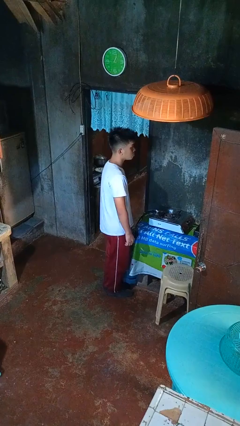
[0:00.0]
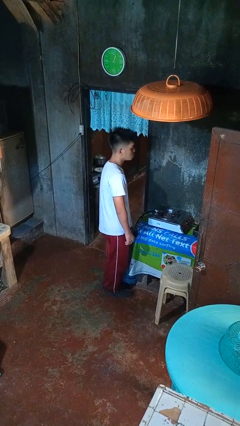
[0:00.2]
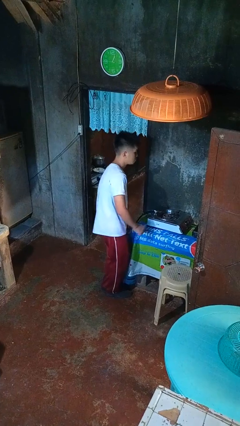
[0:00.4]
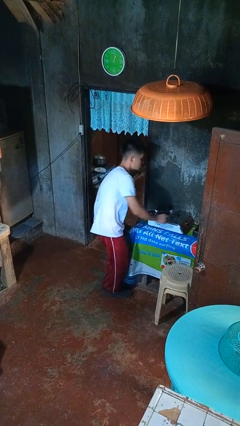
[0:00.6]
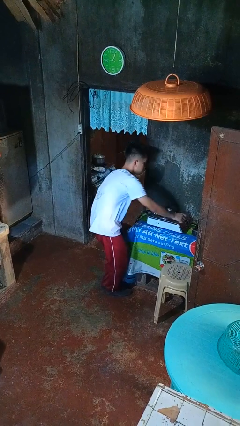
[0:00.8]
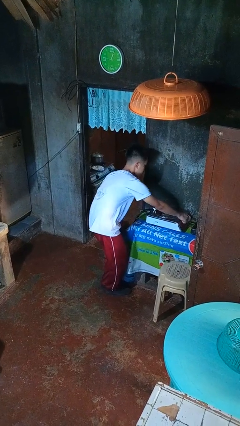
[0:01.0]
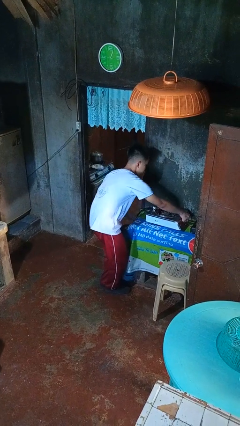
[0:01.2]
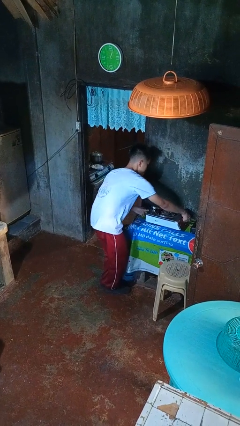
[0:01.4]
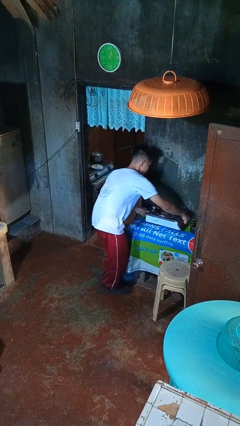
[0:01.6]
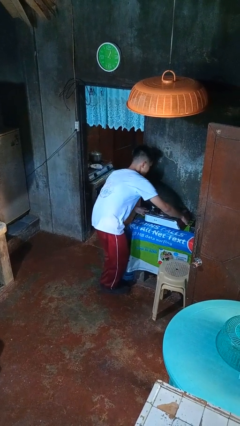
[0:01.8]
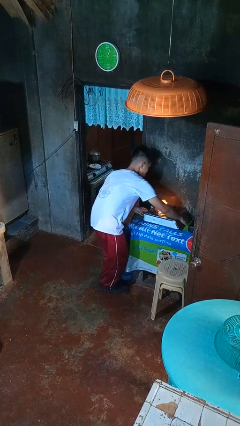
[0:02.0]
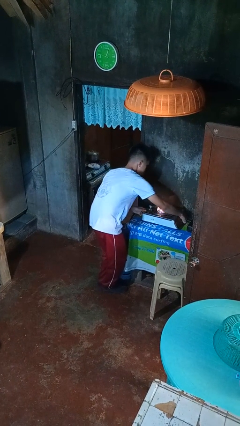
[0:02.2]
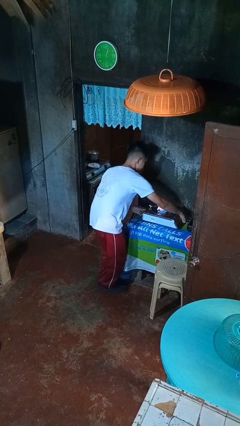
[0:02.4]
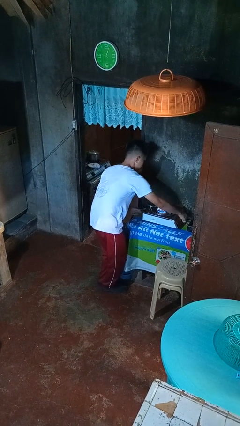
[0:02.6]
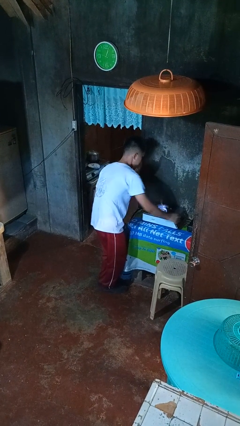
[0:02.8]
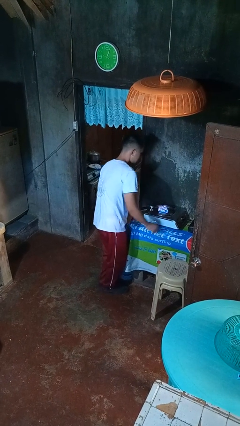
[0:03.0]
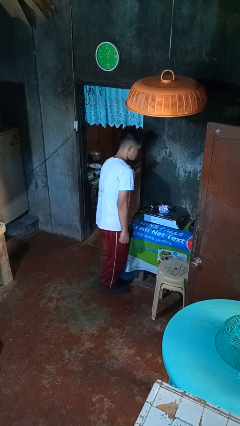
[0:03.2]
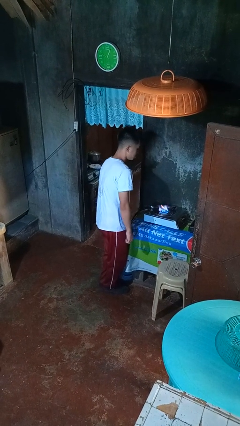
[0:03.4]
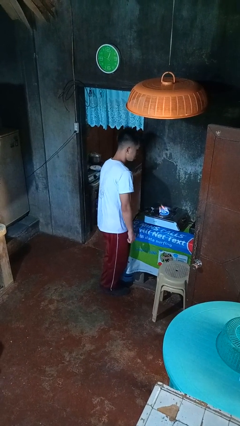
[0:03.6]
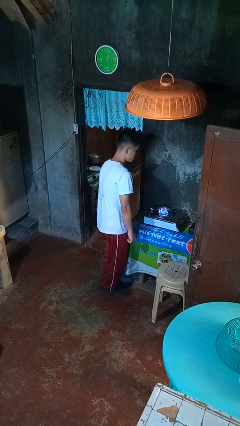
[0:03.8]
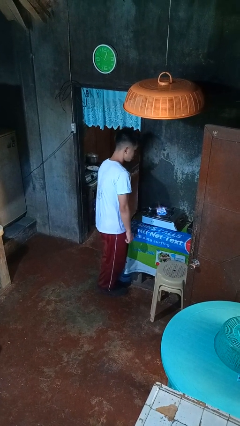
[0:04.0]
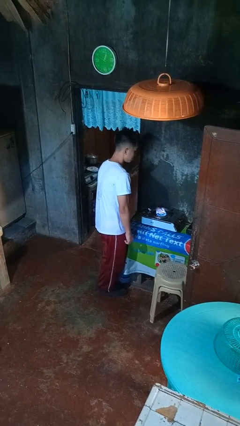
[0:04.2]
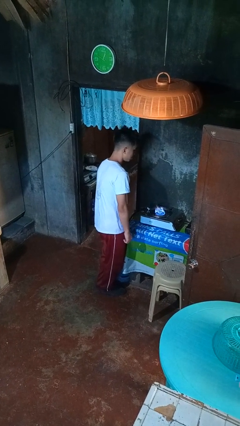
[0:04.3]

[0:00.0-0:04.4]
person turns on stovetop

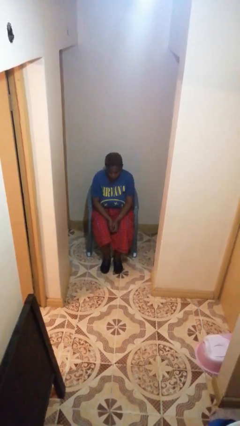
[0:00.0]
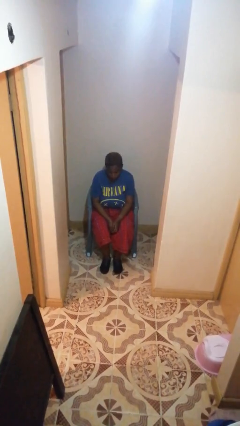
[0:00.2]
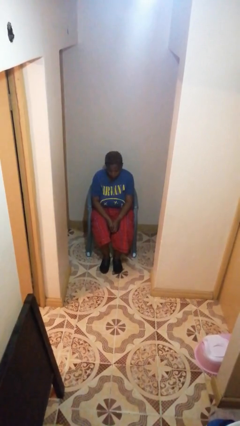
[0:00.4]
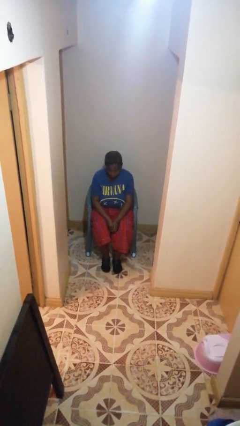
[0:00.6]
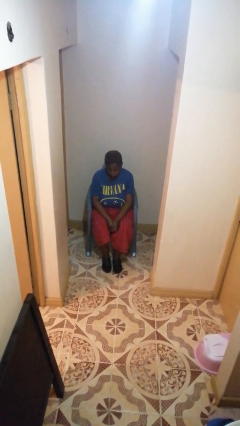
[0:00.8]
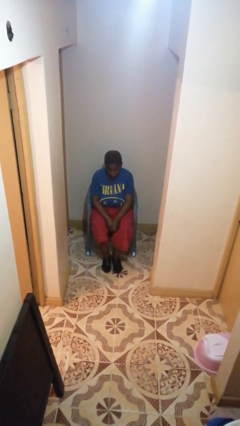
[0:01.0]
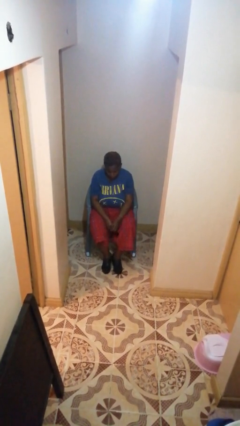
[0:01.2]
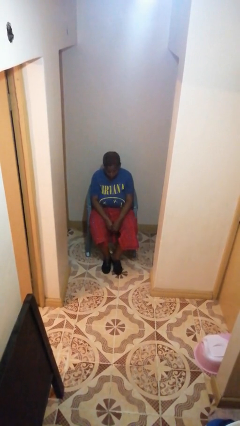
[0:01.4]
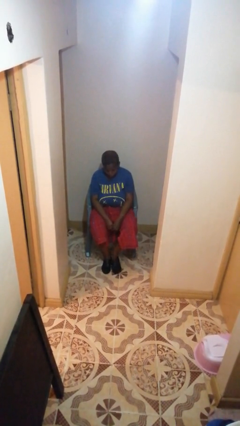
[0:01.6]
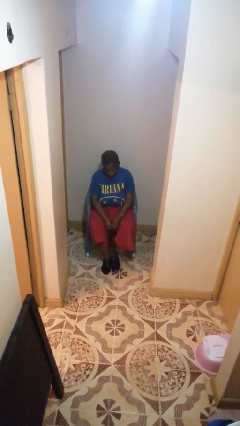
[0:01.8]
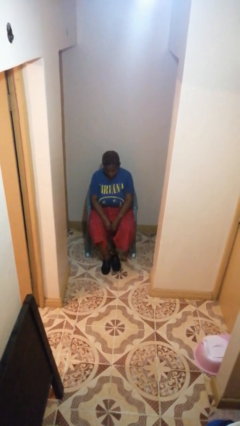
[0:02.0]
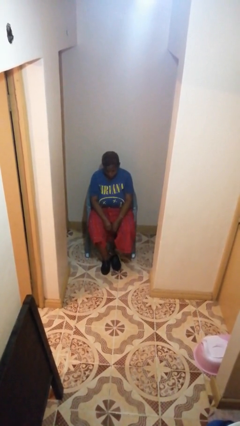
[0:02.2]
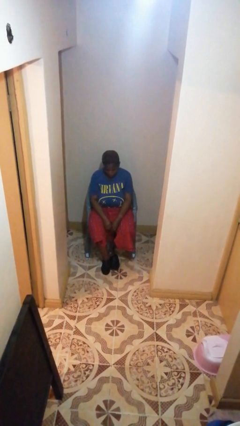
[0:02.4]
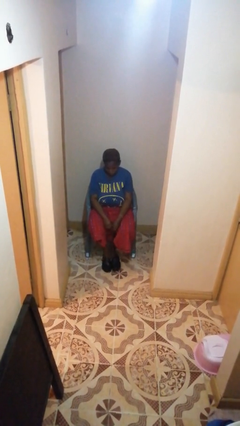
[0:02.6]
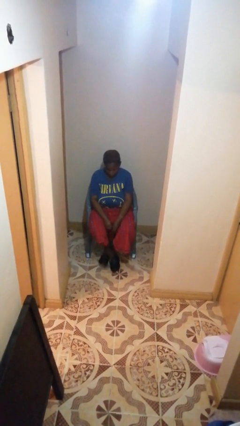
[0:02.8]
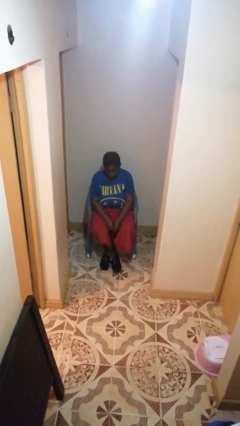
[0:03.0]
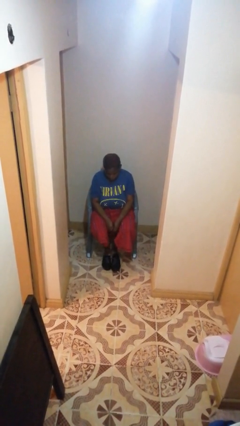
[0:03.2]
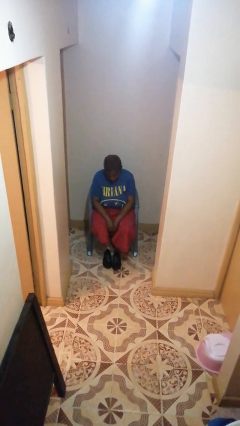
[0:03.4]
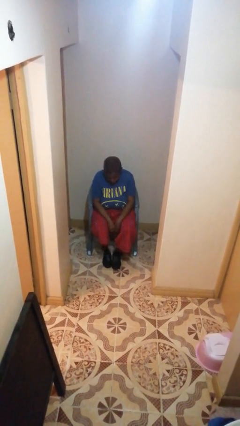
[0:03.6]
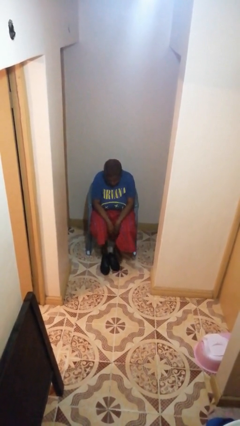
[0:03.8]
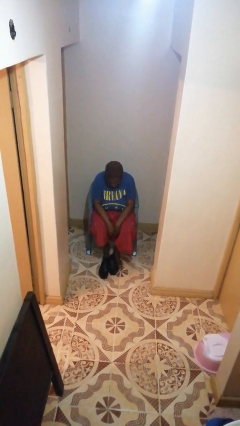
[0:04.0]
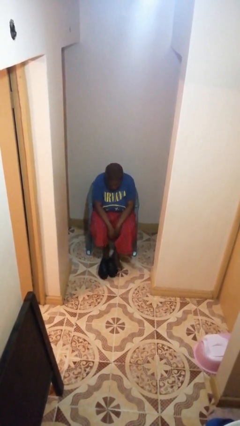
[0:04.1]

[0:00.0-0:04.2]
person takes off shoes

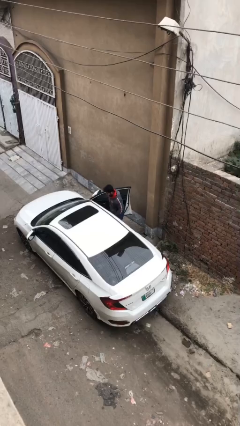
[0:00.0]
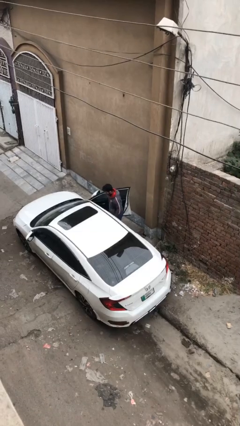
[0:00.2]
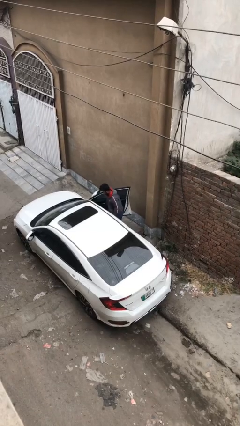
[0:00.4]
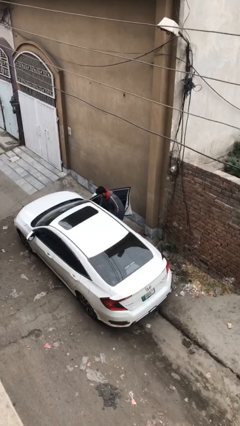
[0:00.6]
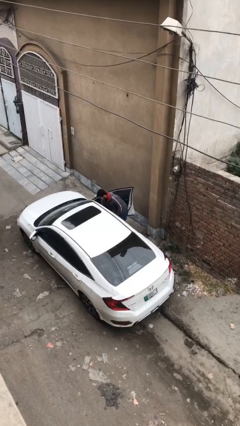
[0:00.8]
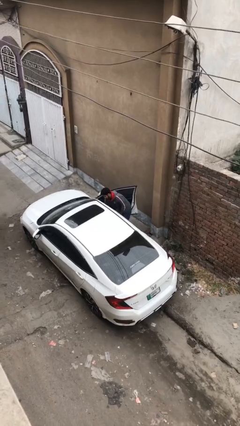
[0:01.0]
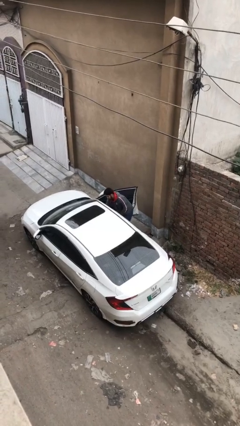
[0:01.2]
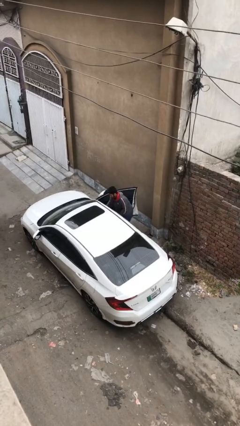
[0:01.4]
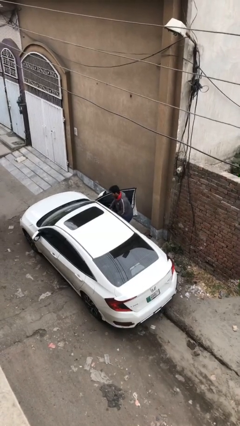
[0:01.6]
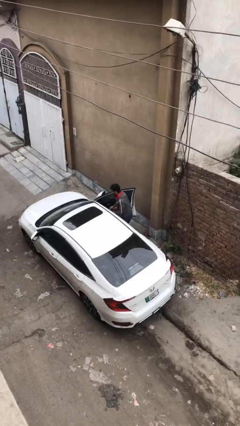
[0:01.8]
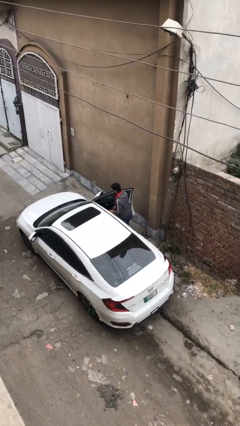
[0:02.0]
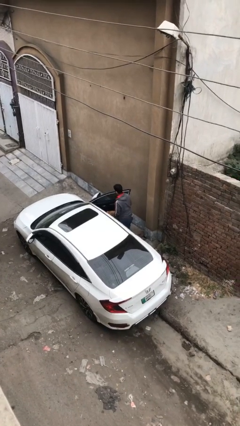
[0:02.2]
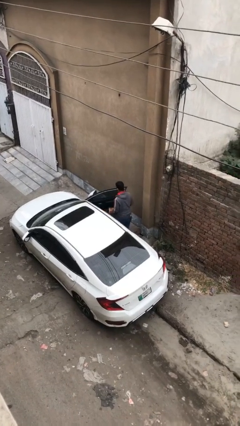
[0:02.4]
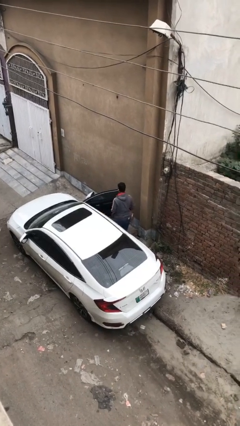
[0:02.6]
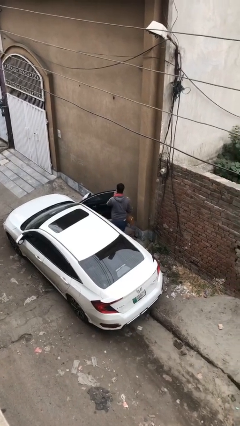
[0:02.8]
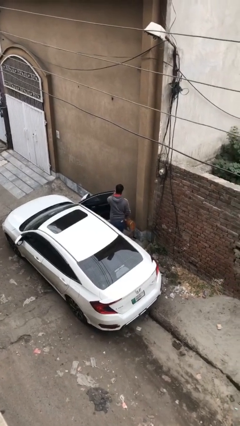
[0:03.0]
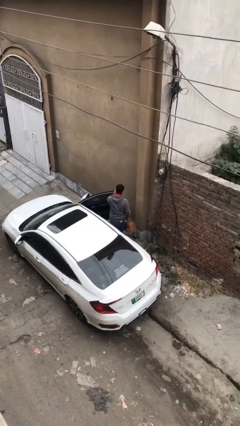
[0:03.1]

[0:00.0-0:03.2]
person unloads car

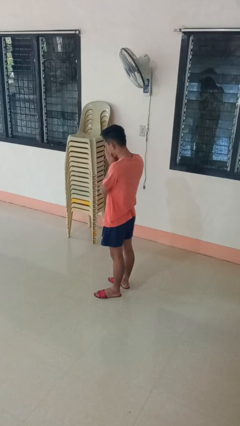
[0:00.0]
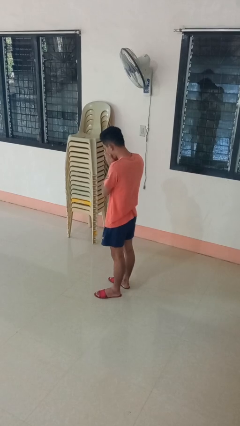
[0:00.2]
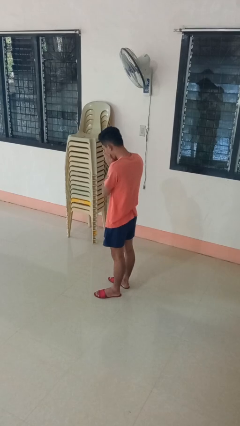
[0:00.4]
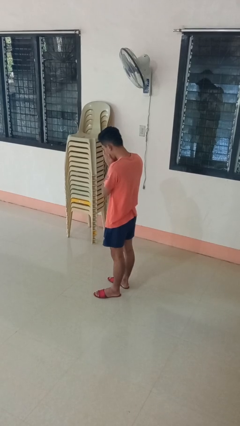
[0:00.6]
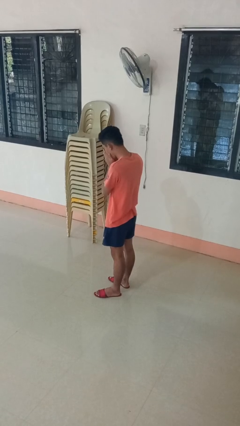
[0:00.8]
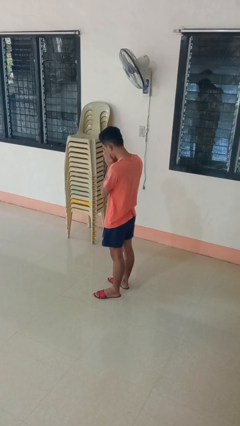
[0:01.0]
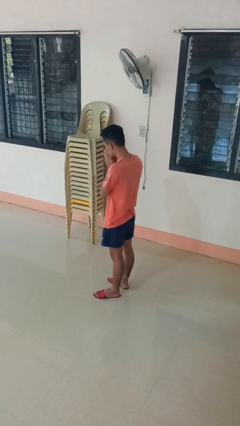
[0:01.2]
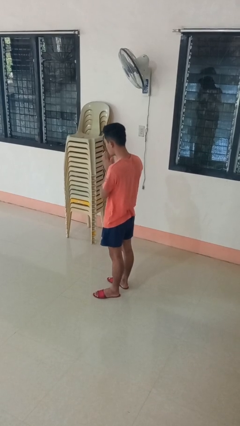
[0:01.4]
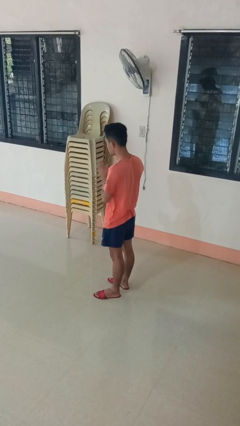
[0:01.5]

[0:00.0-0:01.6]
person sneezes into hand

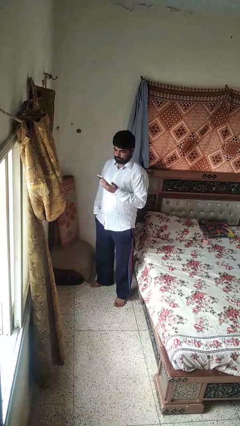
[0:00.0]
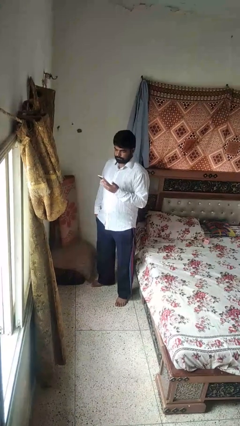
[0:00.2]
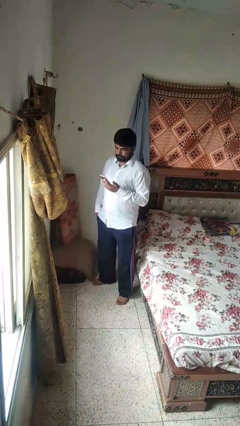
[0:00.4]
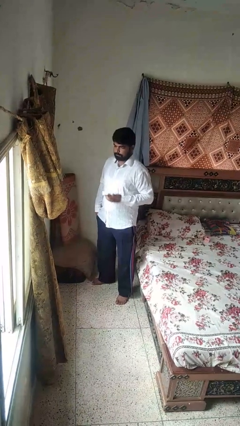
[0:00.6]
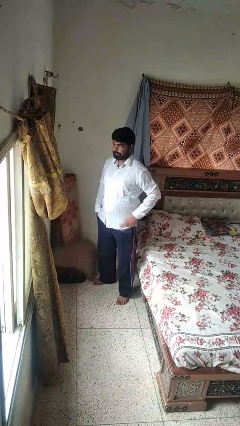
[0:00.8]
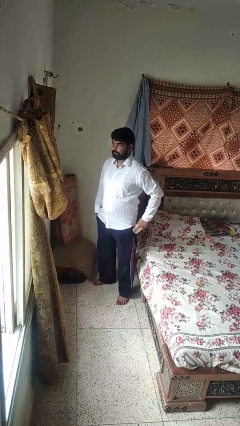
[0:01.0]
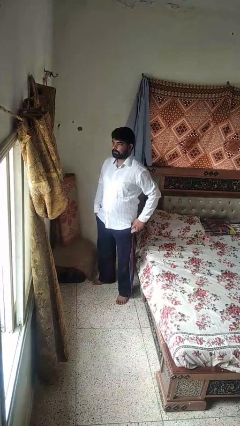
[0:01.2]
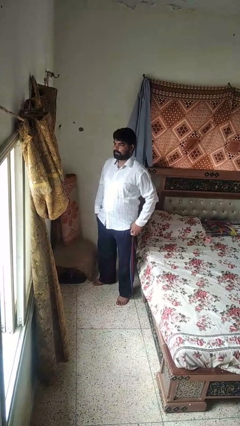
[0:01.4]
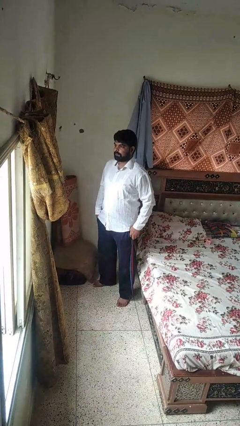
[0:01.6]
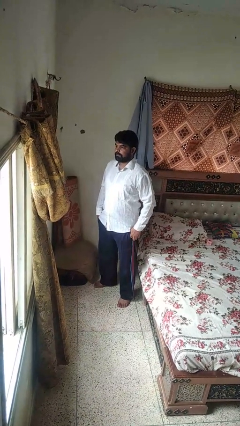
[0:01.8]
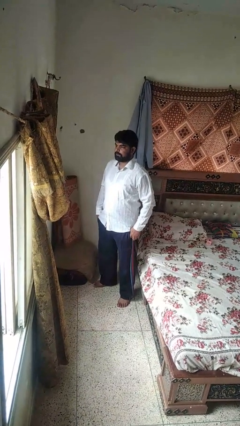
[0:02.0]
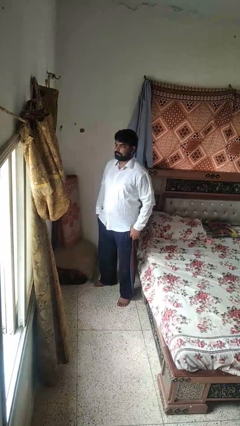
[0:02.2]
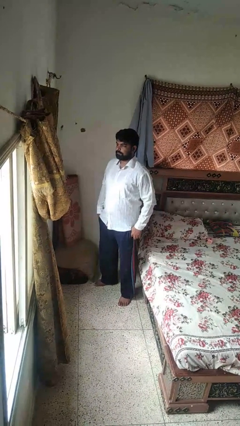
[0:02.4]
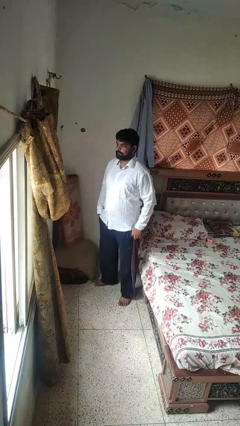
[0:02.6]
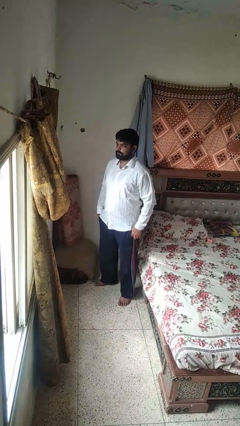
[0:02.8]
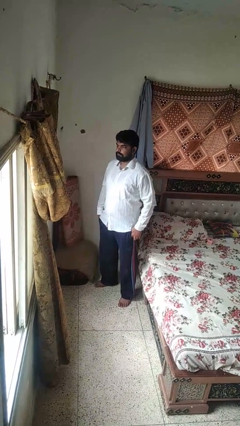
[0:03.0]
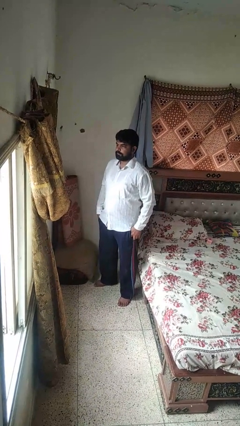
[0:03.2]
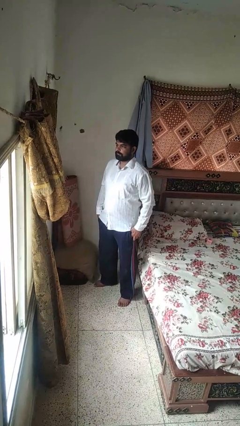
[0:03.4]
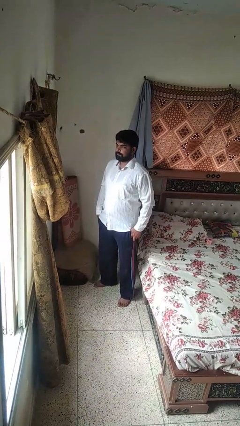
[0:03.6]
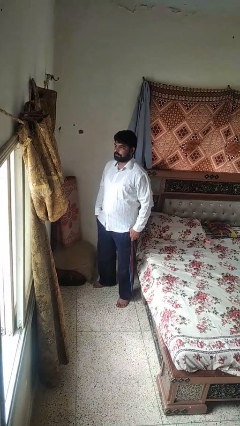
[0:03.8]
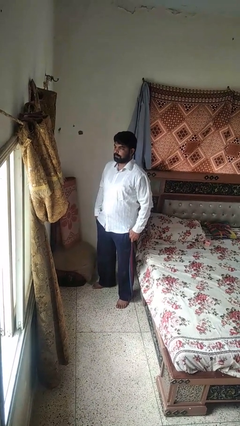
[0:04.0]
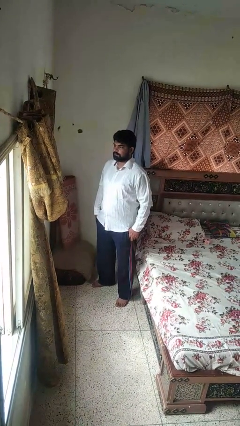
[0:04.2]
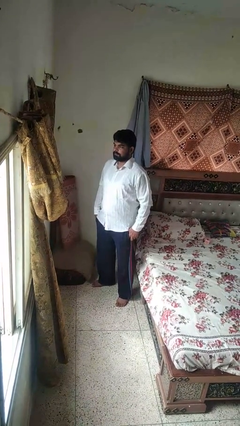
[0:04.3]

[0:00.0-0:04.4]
person puts phone into pocket
